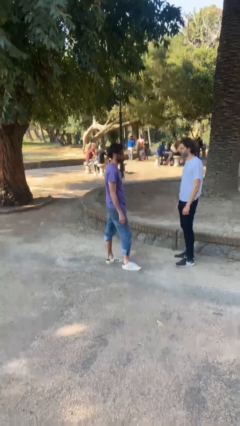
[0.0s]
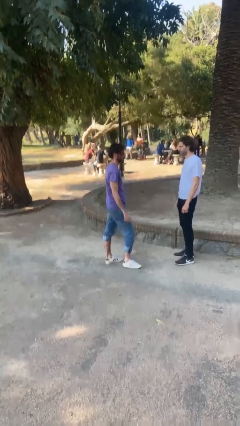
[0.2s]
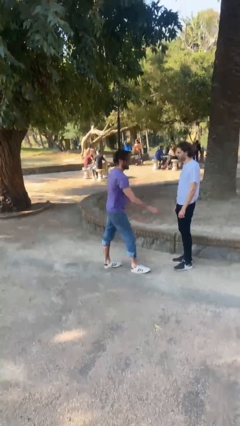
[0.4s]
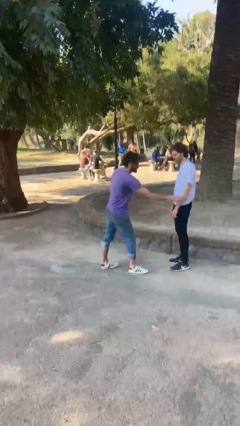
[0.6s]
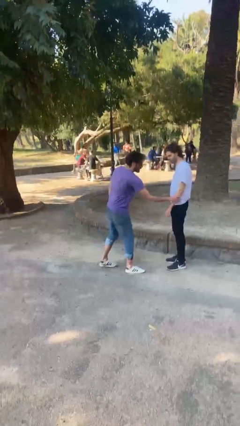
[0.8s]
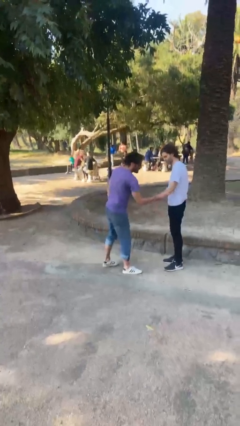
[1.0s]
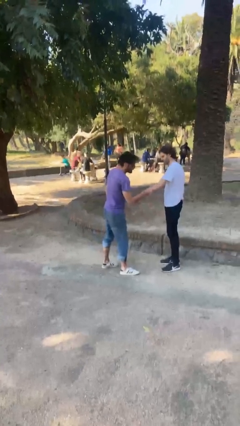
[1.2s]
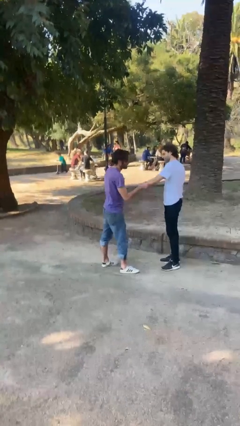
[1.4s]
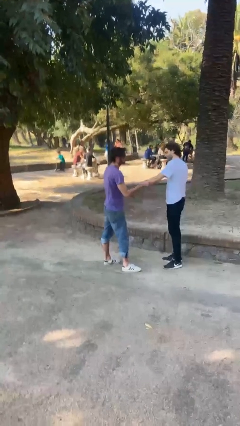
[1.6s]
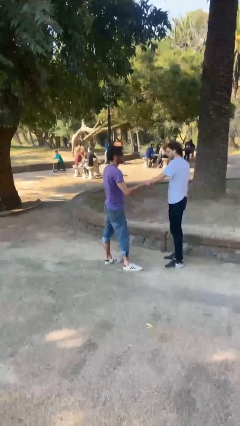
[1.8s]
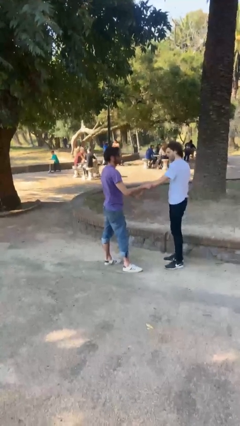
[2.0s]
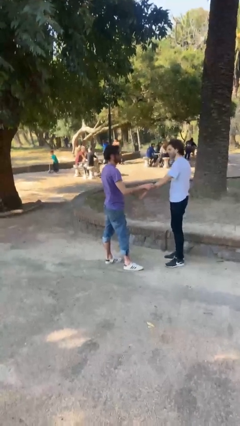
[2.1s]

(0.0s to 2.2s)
person grabs person by forearm

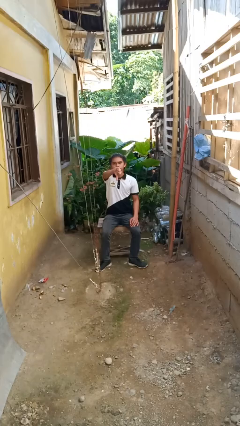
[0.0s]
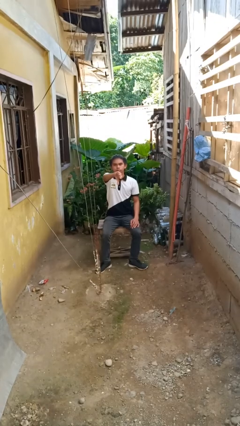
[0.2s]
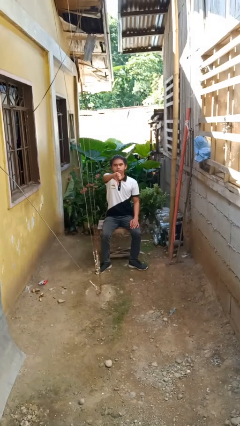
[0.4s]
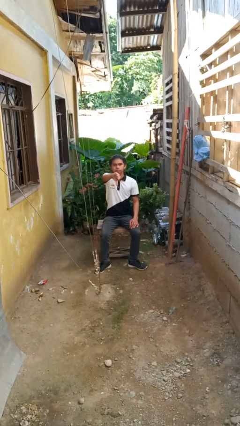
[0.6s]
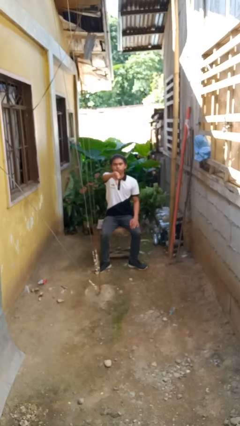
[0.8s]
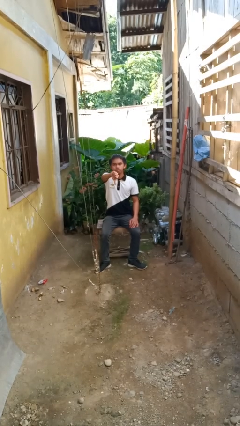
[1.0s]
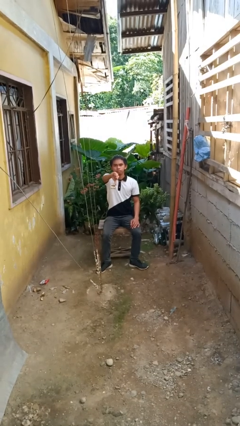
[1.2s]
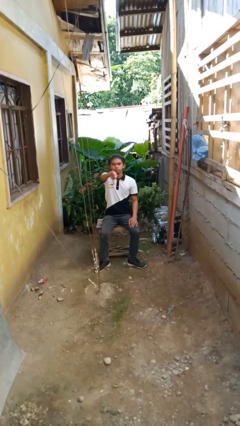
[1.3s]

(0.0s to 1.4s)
person gestures thumbs down

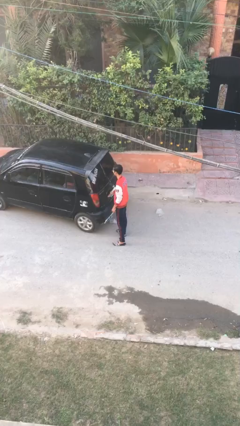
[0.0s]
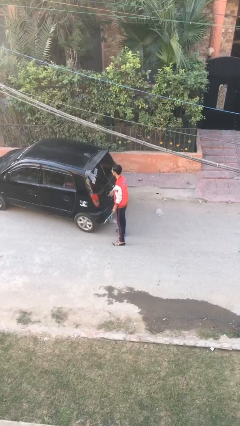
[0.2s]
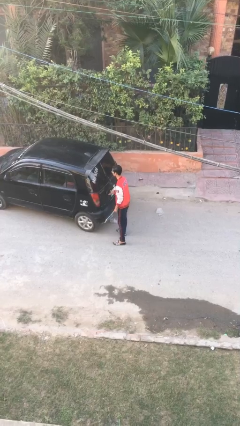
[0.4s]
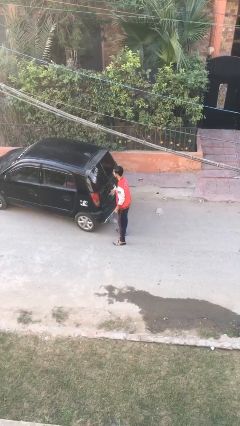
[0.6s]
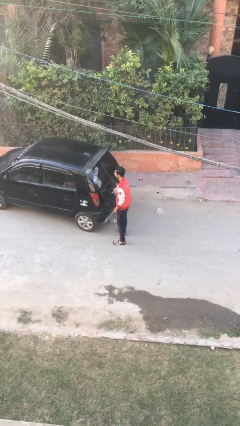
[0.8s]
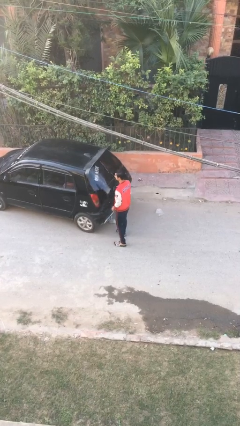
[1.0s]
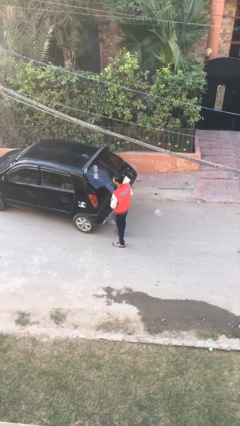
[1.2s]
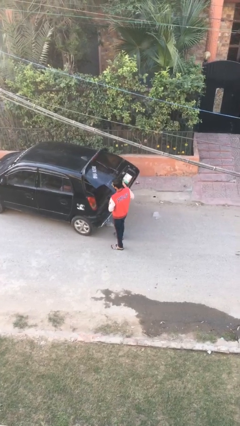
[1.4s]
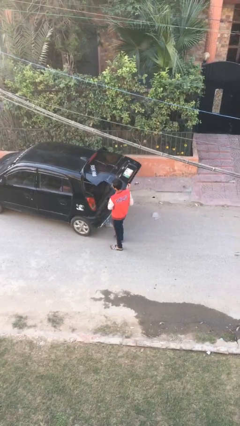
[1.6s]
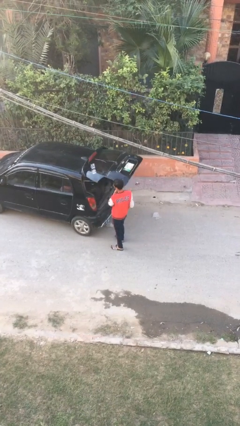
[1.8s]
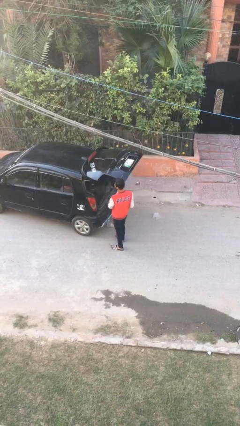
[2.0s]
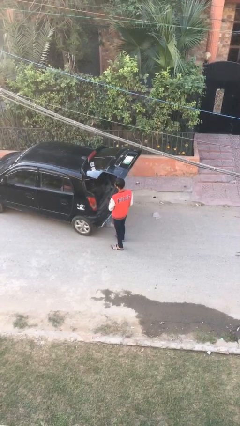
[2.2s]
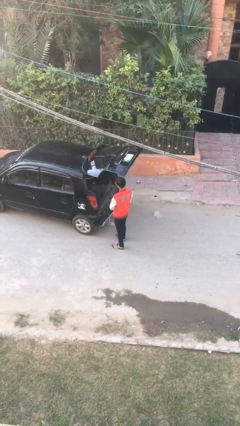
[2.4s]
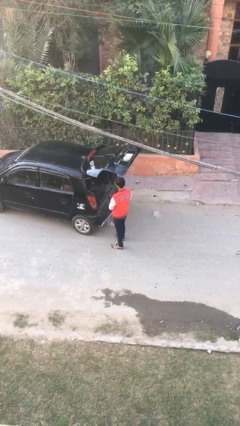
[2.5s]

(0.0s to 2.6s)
person opens car trunk

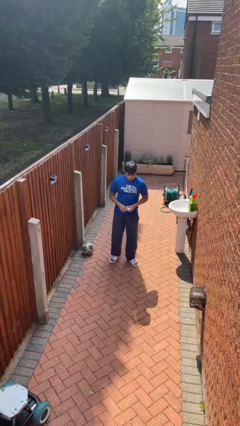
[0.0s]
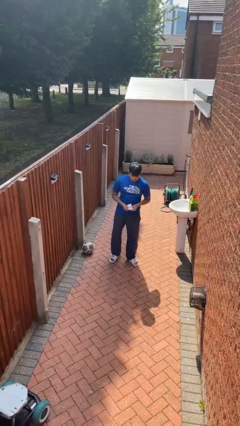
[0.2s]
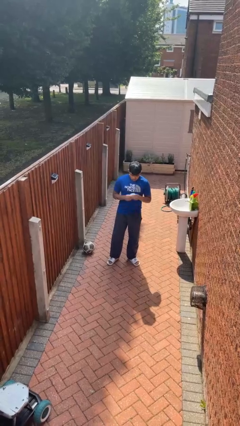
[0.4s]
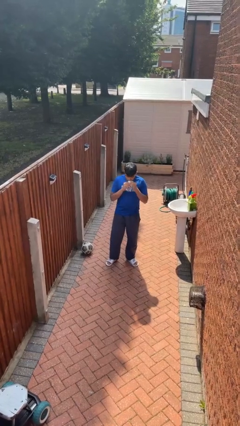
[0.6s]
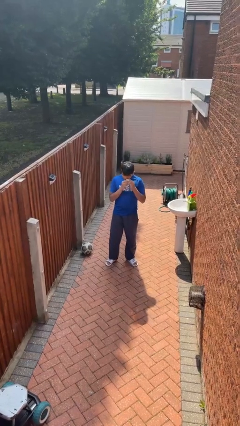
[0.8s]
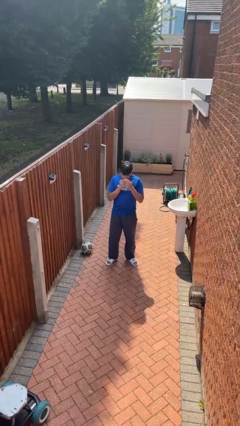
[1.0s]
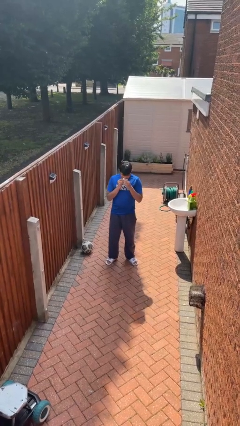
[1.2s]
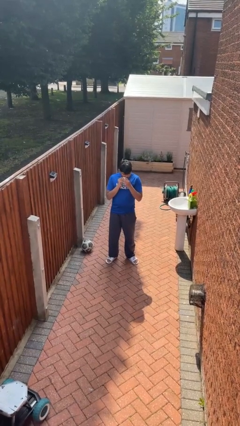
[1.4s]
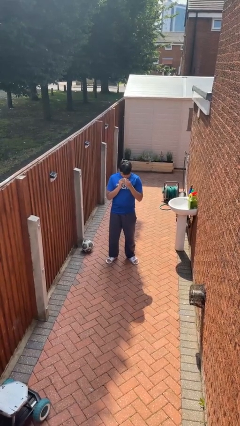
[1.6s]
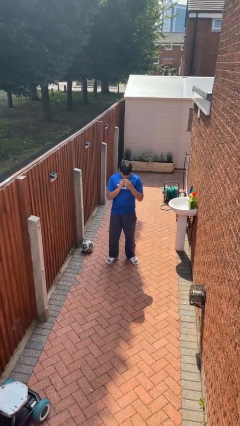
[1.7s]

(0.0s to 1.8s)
person wipes mouth with napkin

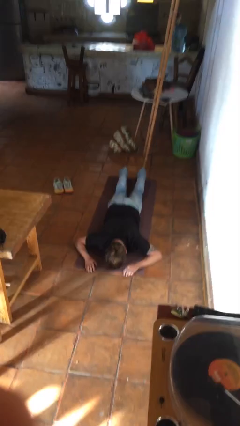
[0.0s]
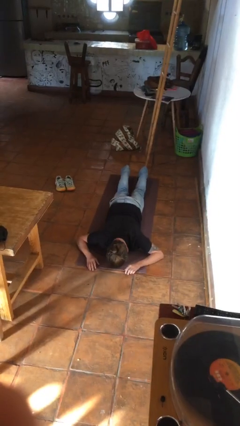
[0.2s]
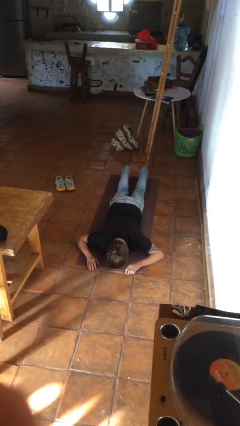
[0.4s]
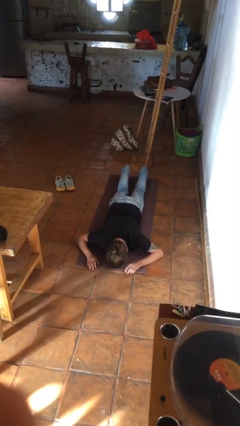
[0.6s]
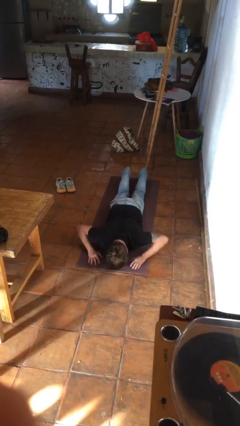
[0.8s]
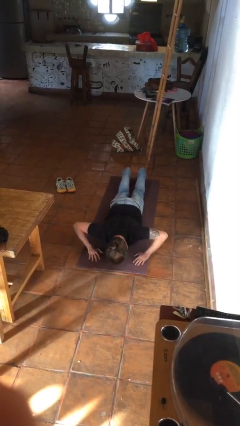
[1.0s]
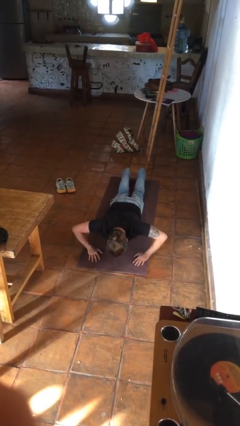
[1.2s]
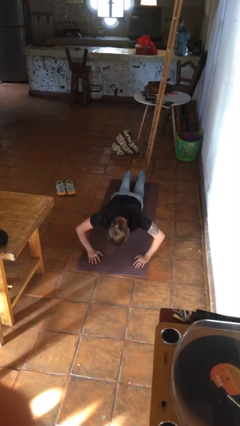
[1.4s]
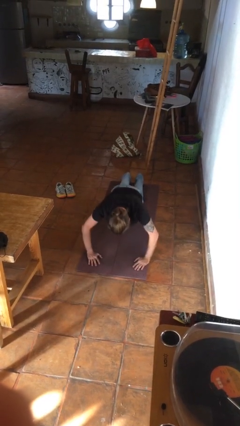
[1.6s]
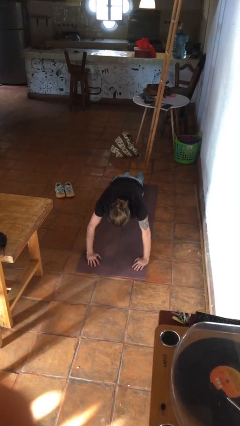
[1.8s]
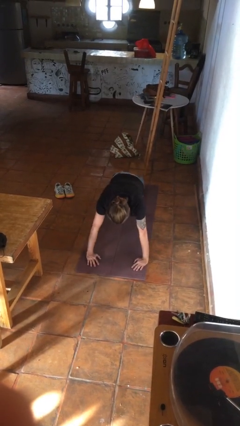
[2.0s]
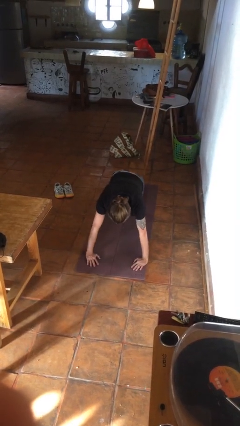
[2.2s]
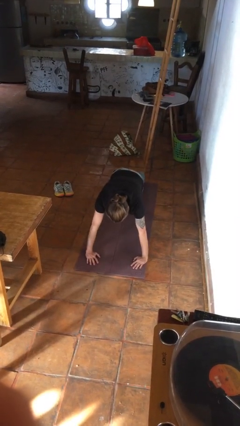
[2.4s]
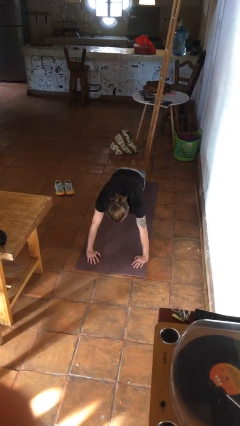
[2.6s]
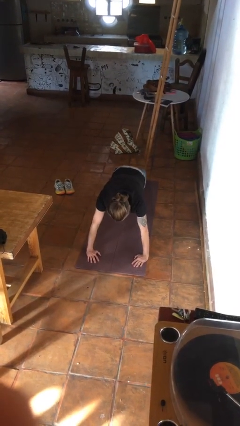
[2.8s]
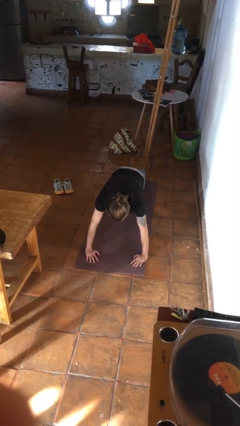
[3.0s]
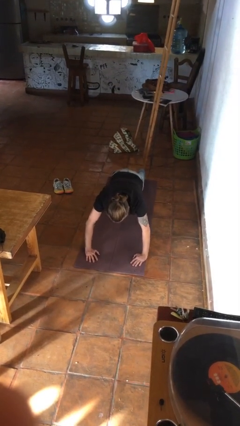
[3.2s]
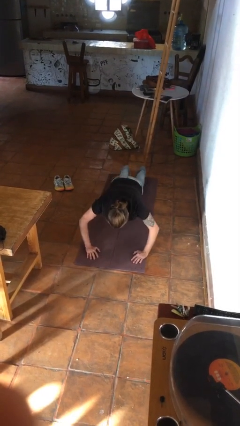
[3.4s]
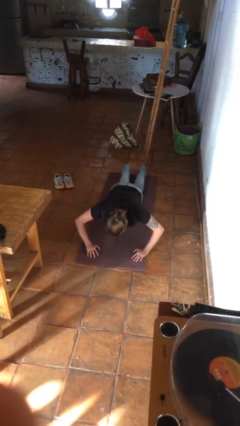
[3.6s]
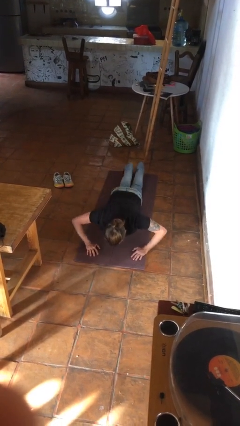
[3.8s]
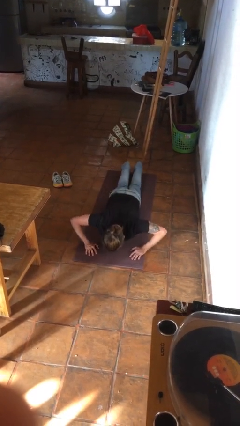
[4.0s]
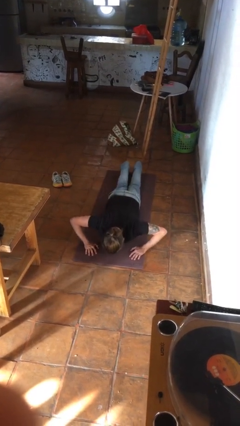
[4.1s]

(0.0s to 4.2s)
person exercises with pushup

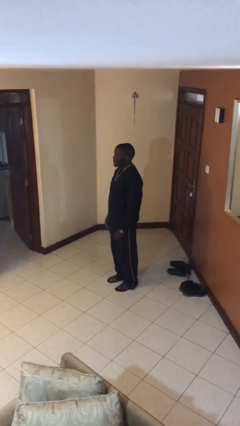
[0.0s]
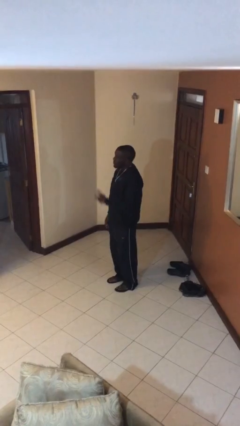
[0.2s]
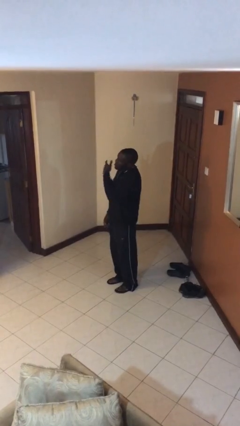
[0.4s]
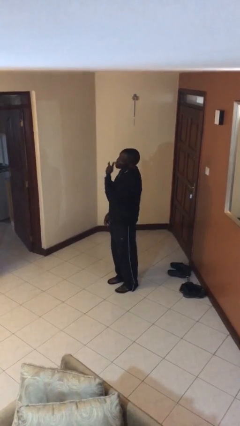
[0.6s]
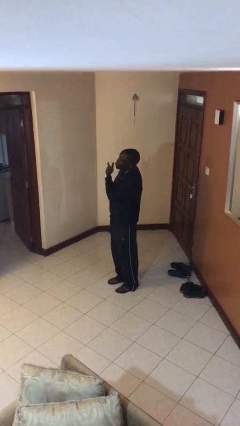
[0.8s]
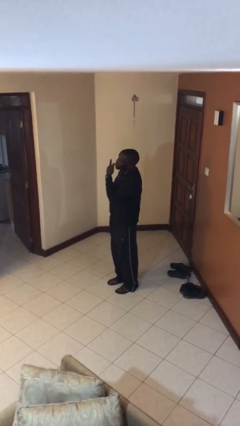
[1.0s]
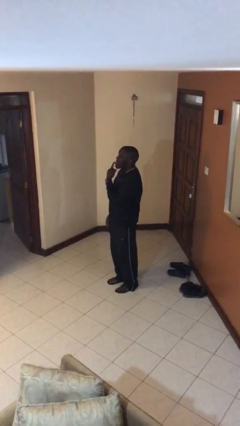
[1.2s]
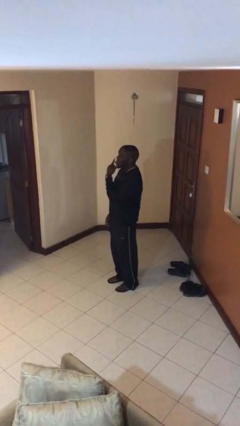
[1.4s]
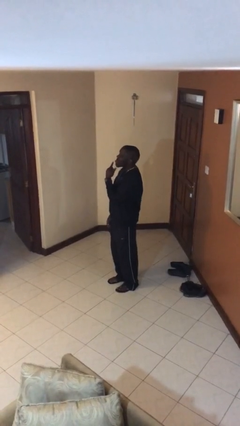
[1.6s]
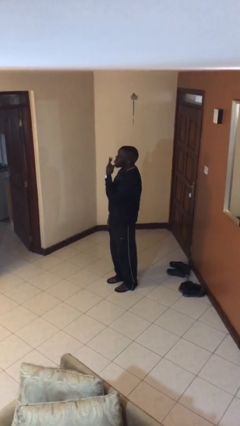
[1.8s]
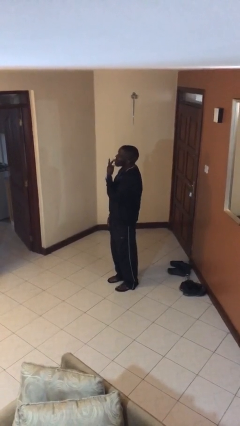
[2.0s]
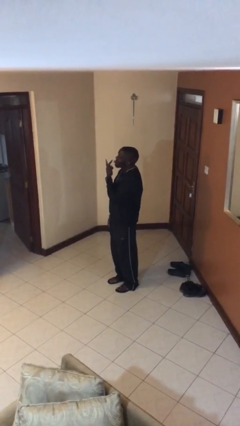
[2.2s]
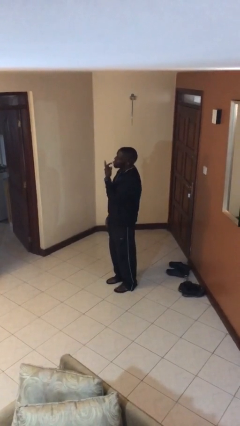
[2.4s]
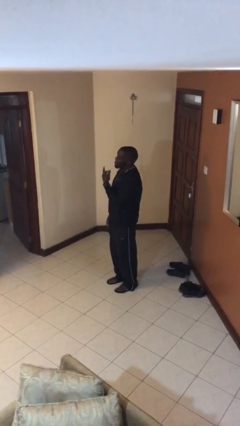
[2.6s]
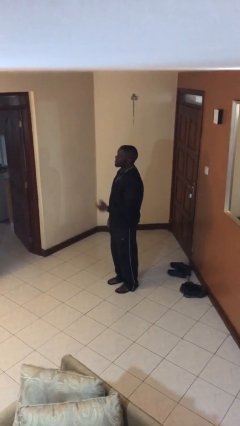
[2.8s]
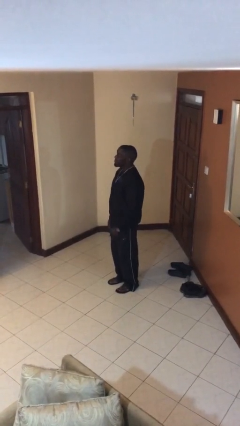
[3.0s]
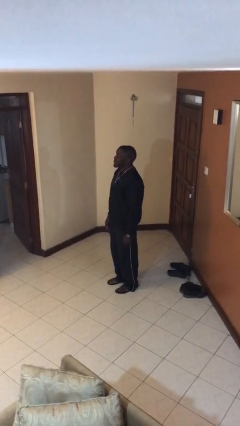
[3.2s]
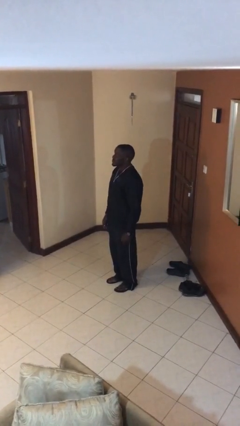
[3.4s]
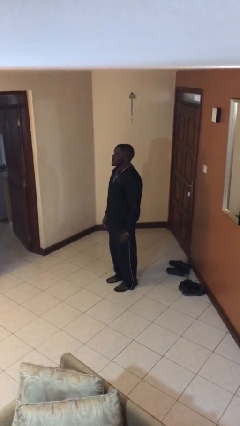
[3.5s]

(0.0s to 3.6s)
person licks fingers

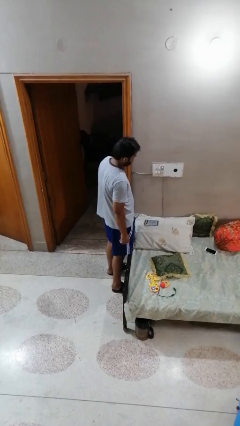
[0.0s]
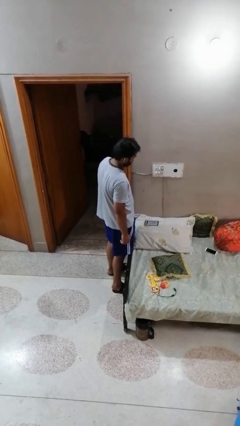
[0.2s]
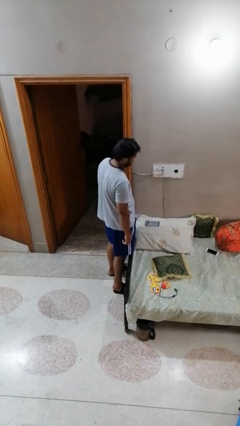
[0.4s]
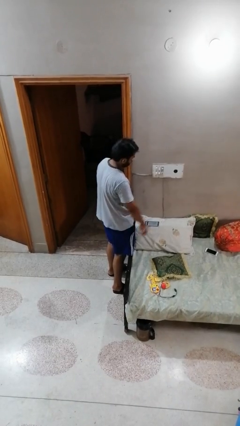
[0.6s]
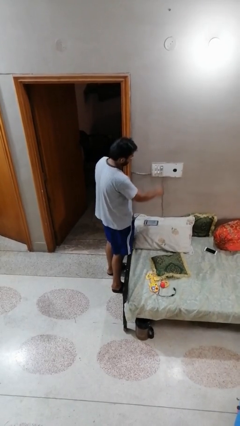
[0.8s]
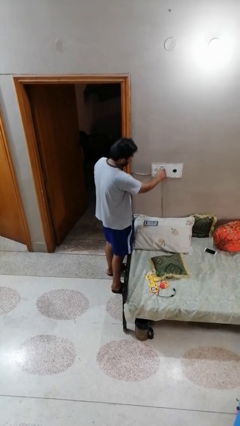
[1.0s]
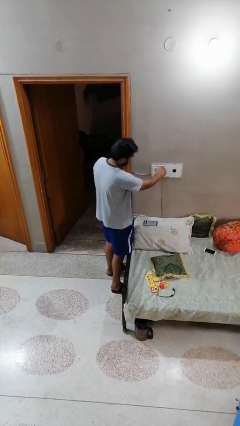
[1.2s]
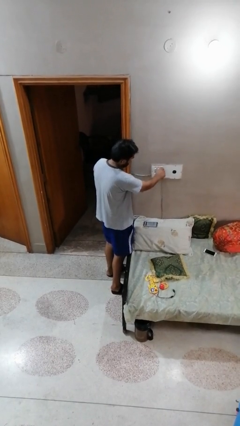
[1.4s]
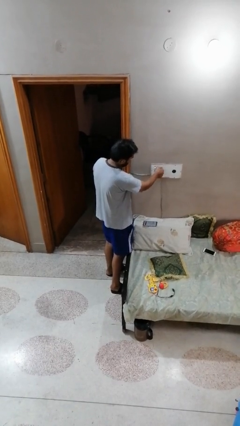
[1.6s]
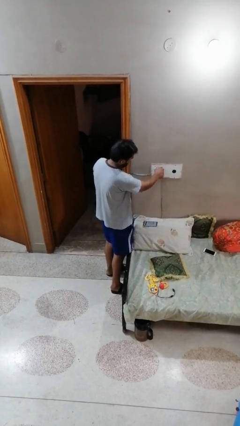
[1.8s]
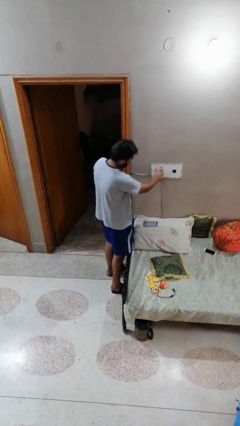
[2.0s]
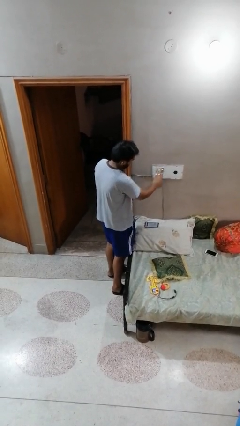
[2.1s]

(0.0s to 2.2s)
person adjusts thermostat
